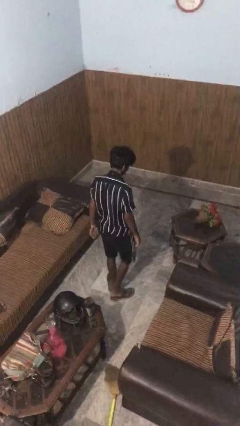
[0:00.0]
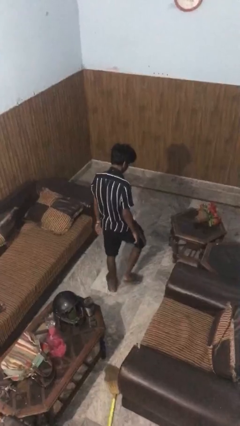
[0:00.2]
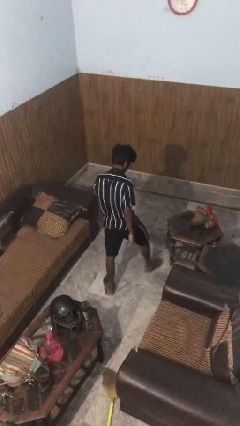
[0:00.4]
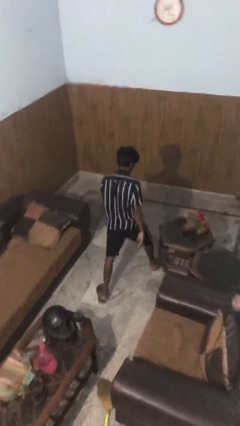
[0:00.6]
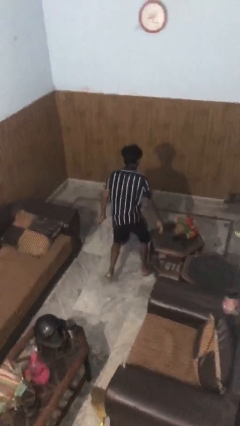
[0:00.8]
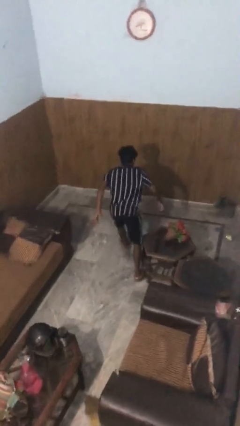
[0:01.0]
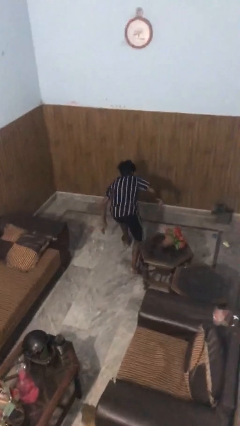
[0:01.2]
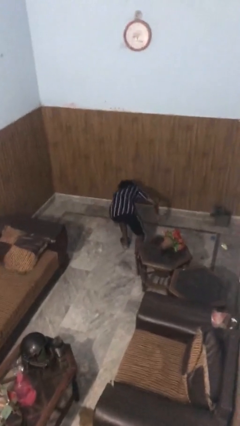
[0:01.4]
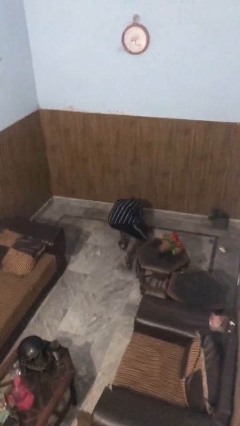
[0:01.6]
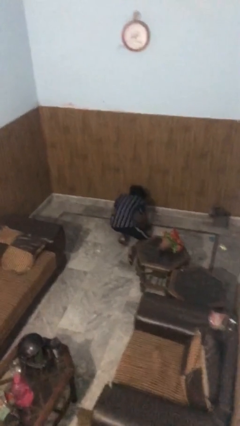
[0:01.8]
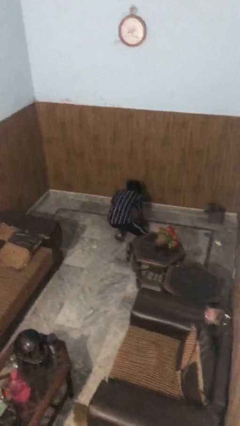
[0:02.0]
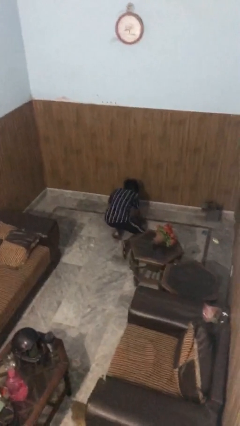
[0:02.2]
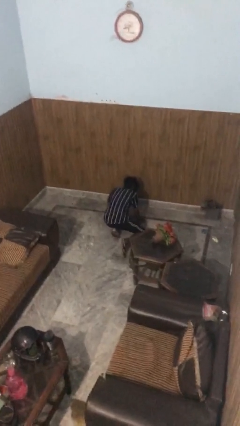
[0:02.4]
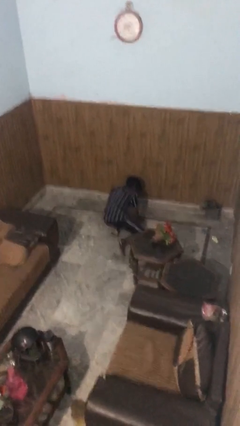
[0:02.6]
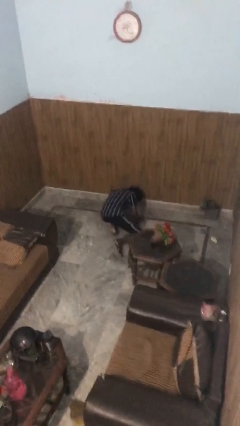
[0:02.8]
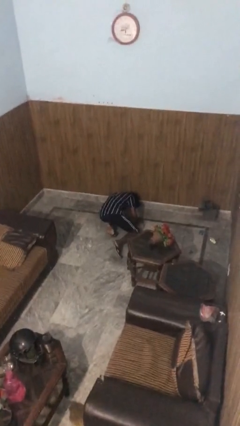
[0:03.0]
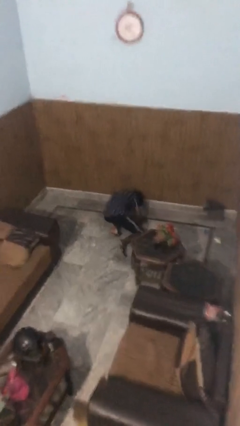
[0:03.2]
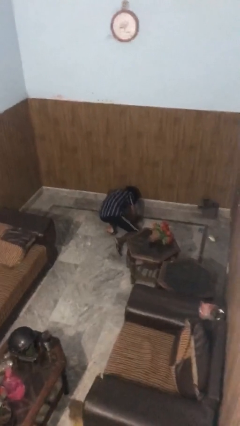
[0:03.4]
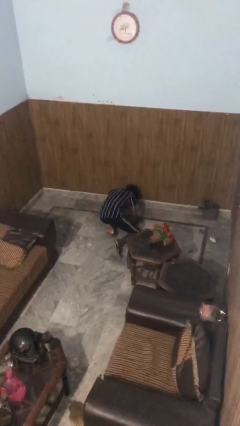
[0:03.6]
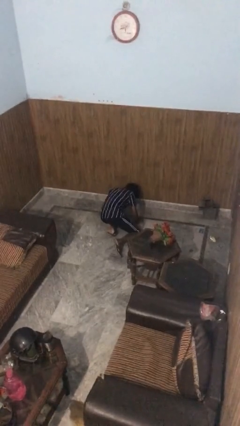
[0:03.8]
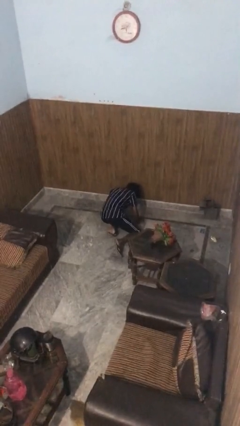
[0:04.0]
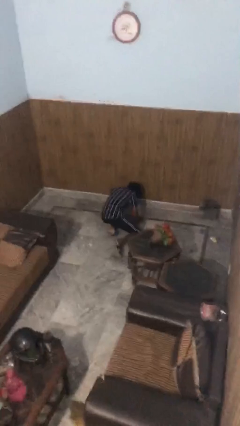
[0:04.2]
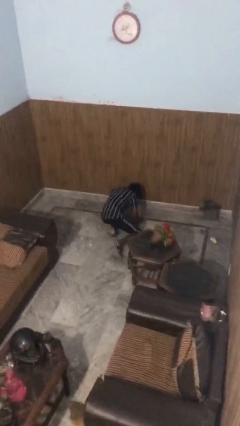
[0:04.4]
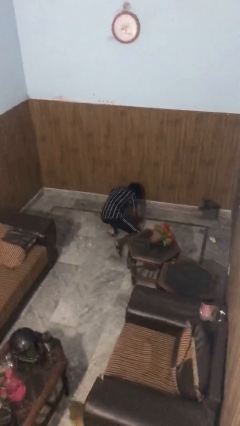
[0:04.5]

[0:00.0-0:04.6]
person trips on object on floor

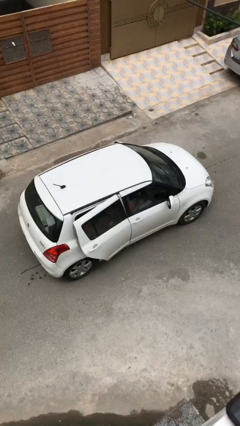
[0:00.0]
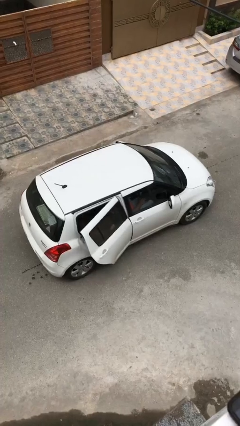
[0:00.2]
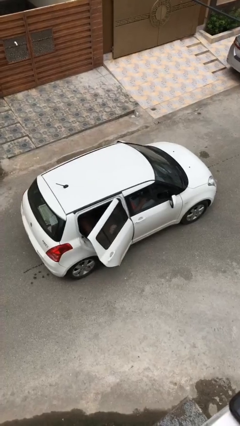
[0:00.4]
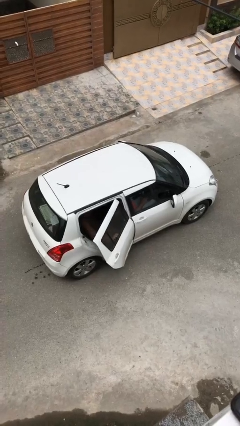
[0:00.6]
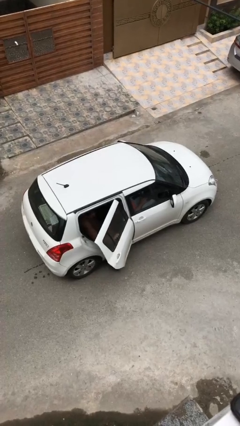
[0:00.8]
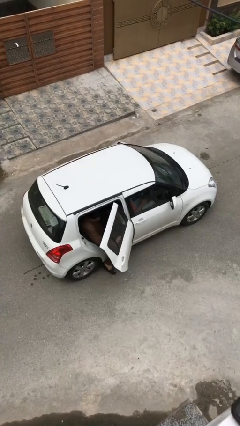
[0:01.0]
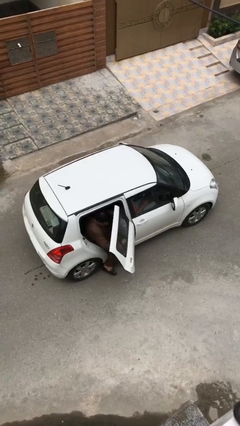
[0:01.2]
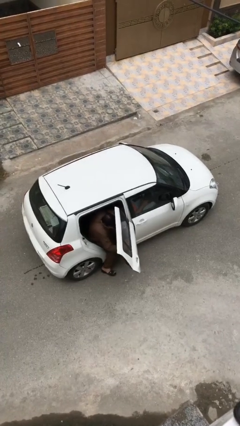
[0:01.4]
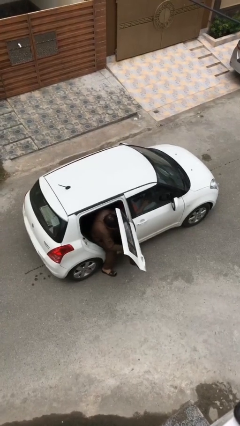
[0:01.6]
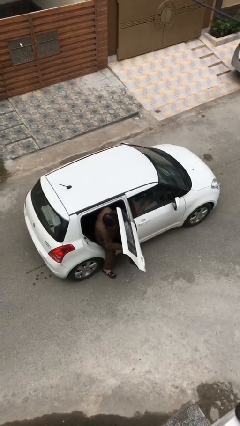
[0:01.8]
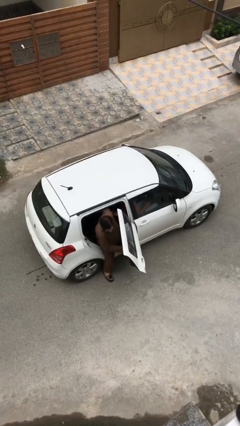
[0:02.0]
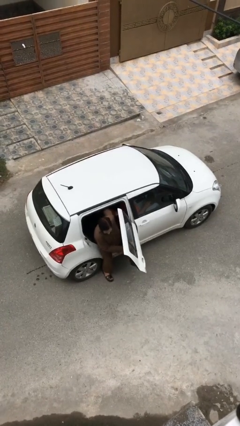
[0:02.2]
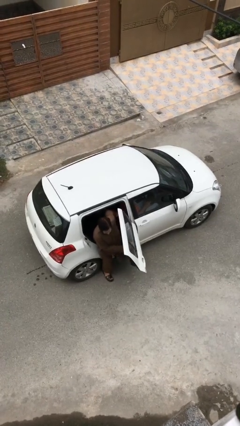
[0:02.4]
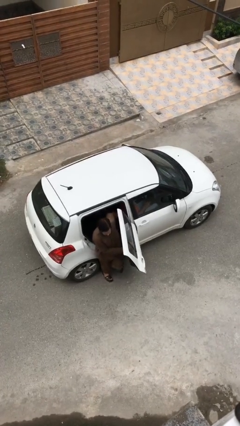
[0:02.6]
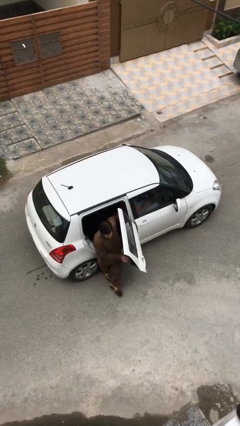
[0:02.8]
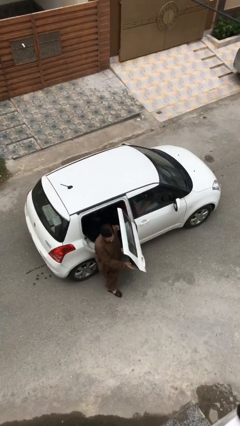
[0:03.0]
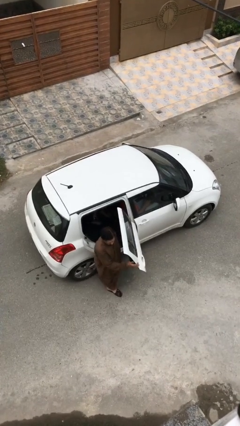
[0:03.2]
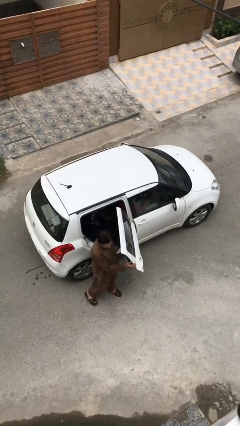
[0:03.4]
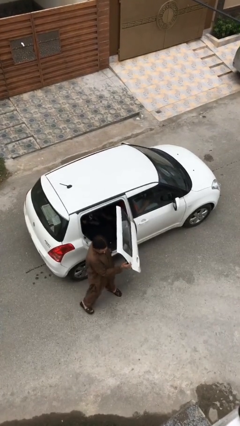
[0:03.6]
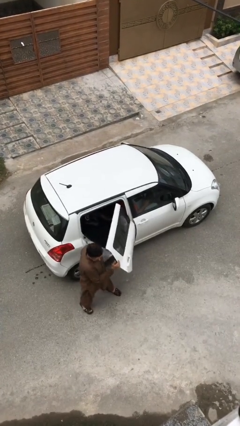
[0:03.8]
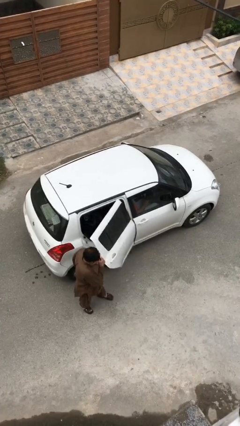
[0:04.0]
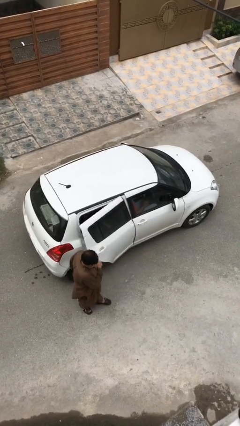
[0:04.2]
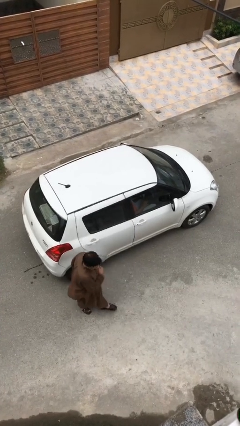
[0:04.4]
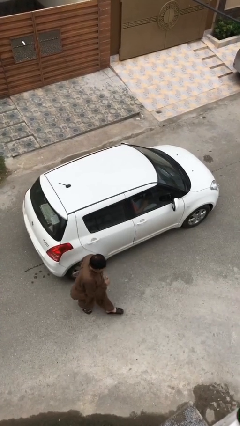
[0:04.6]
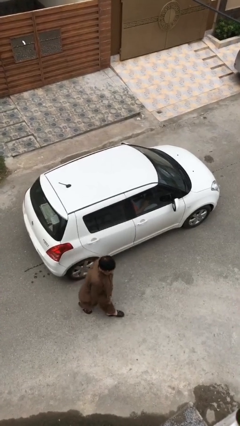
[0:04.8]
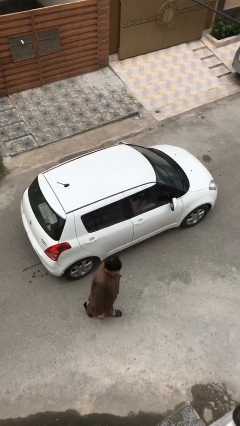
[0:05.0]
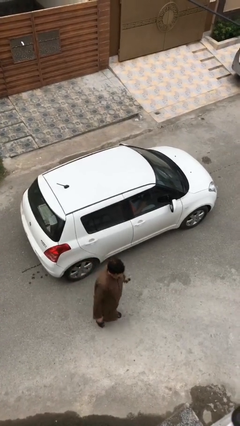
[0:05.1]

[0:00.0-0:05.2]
car drops off person

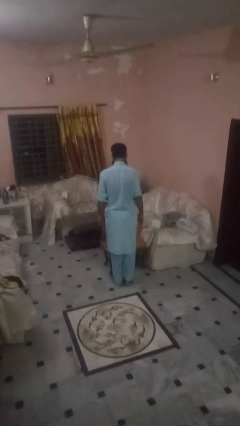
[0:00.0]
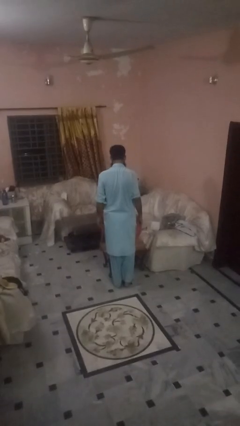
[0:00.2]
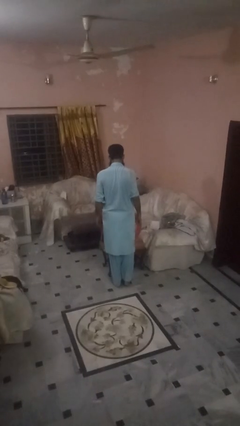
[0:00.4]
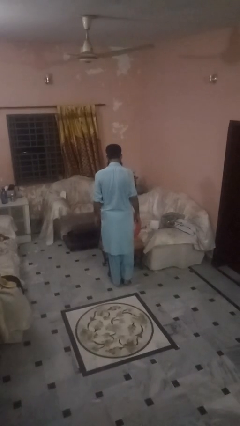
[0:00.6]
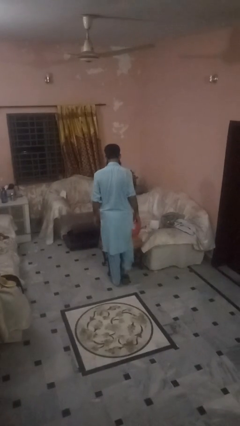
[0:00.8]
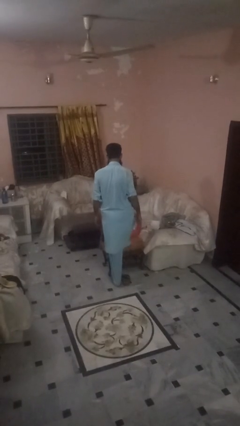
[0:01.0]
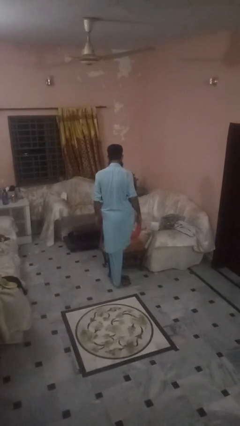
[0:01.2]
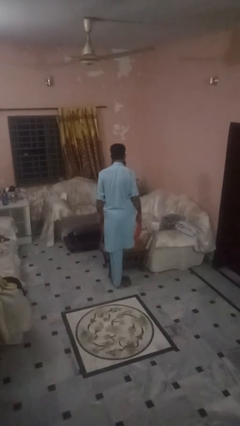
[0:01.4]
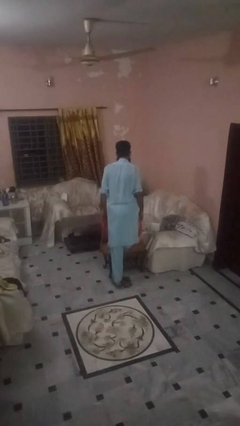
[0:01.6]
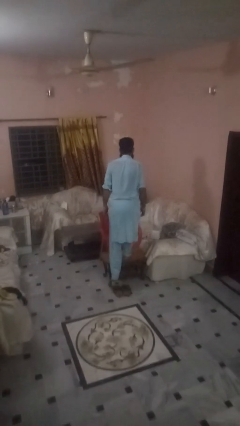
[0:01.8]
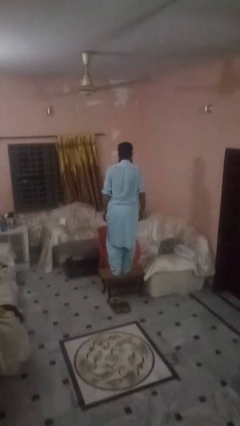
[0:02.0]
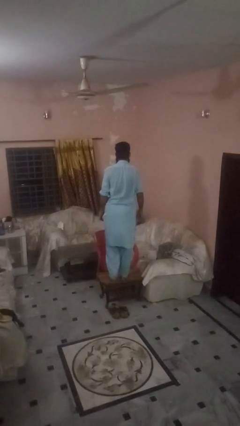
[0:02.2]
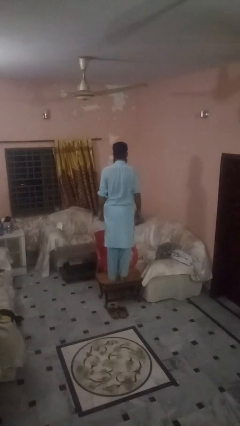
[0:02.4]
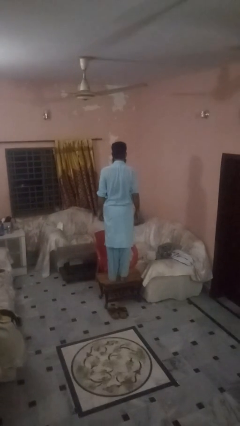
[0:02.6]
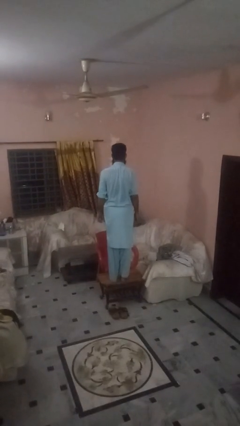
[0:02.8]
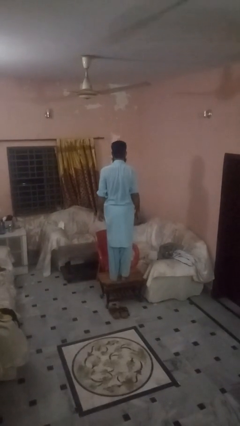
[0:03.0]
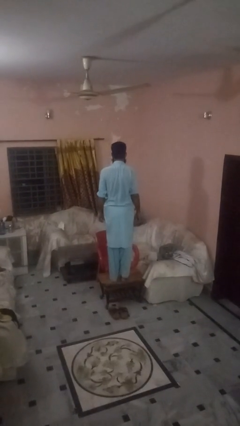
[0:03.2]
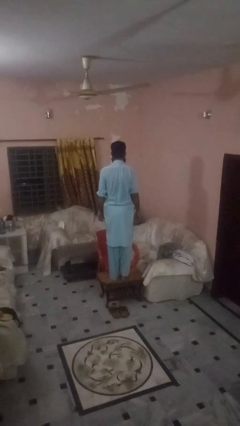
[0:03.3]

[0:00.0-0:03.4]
person climbs on table

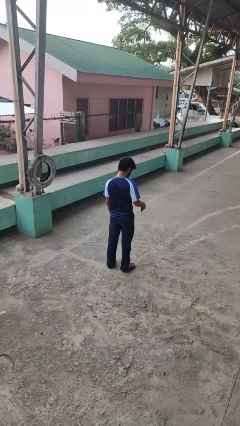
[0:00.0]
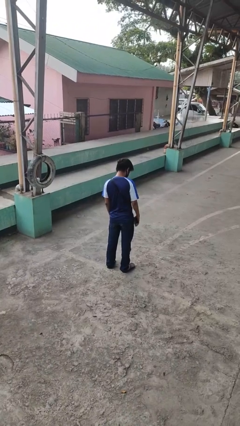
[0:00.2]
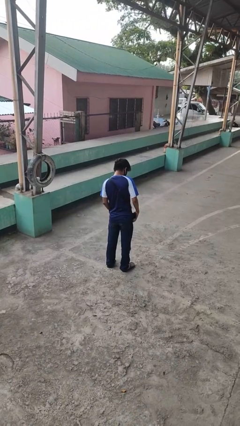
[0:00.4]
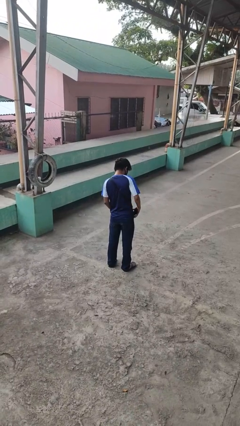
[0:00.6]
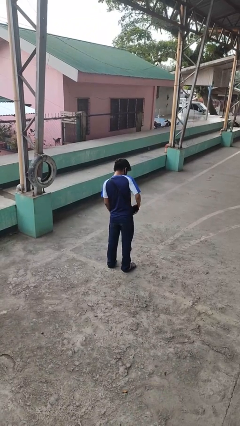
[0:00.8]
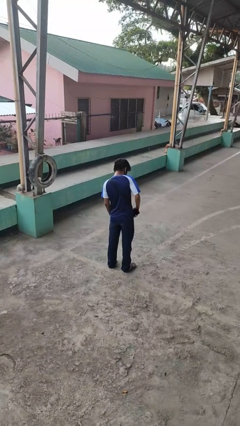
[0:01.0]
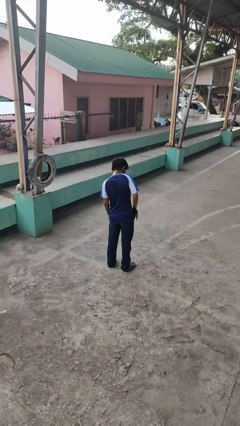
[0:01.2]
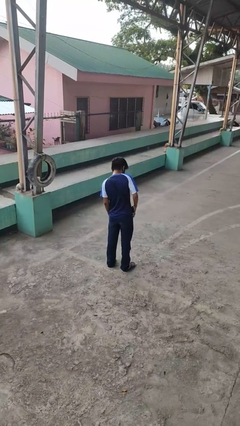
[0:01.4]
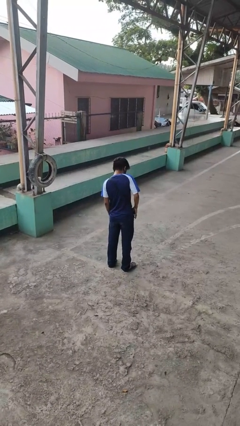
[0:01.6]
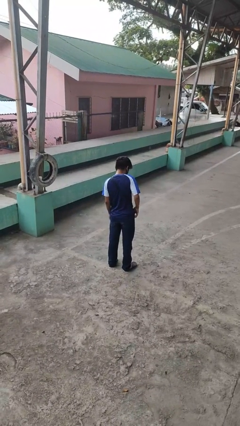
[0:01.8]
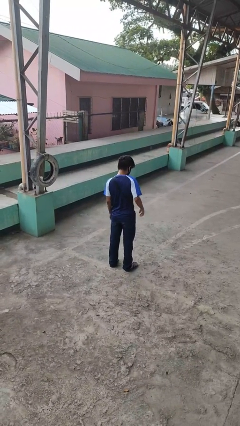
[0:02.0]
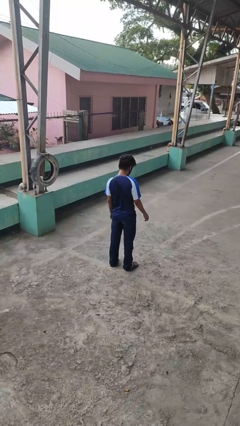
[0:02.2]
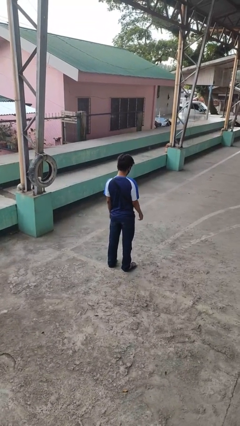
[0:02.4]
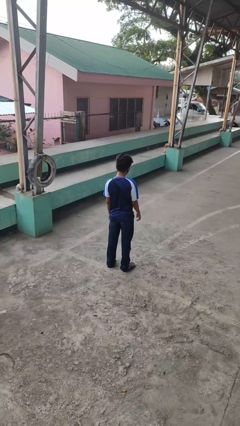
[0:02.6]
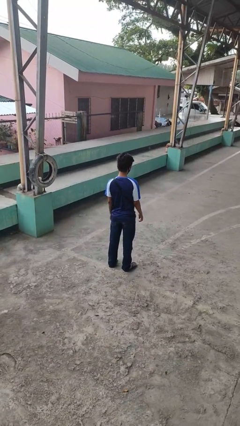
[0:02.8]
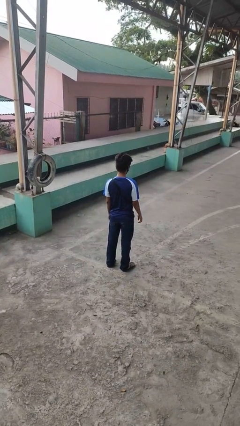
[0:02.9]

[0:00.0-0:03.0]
person puts phone into pocket

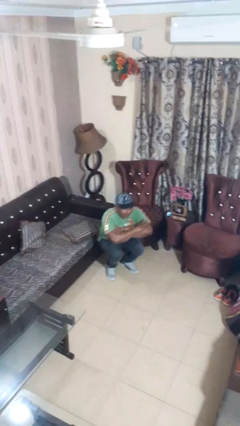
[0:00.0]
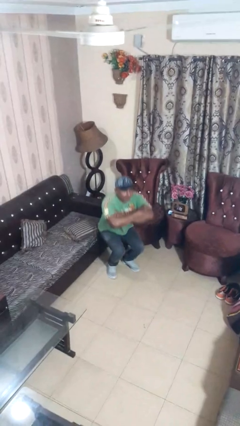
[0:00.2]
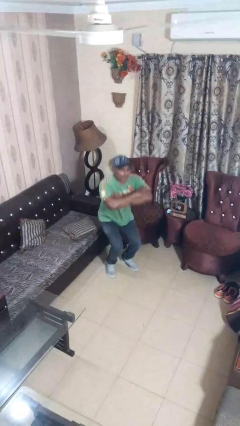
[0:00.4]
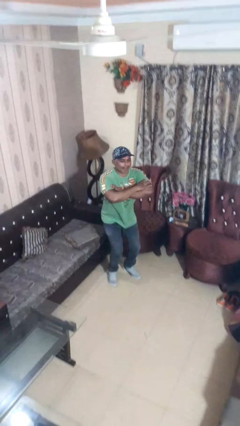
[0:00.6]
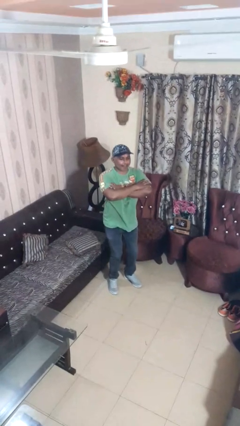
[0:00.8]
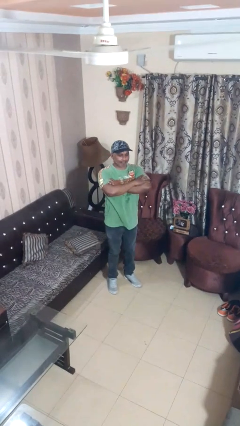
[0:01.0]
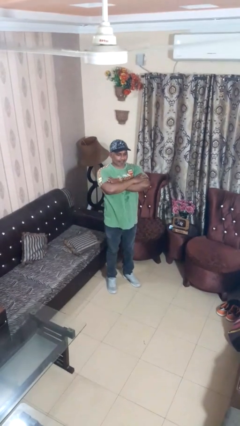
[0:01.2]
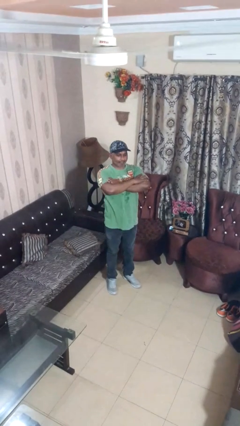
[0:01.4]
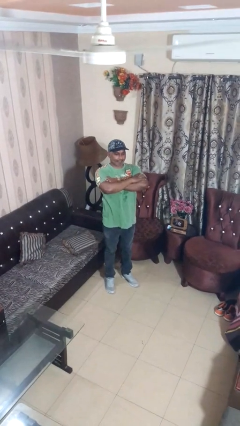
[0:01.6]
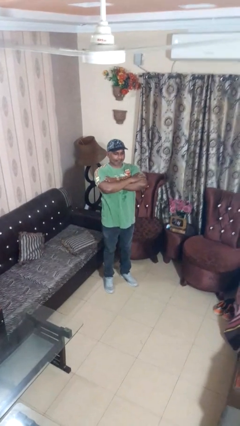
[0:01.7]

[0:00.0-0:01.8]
person stands up
